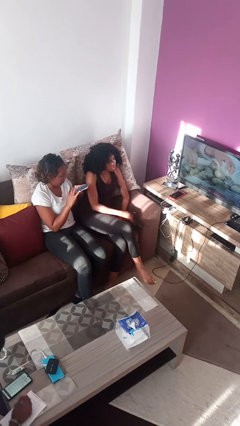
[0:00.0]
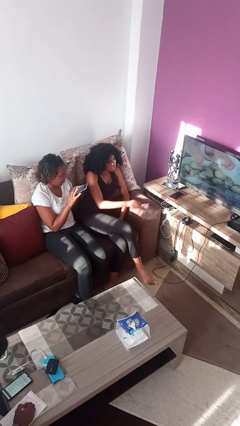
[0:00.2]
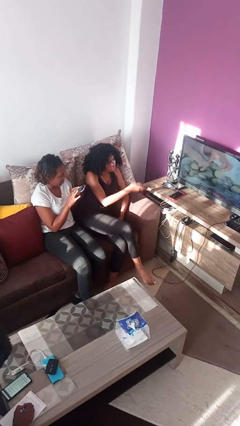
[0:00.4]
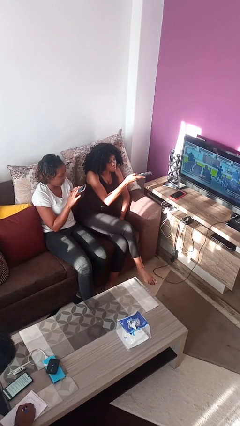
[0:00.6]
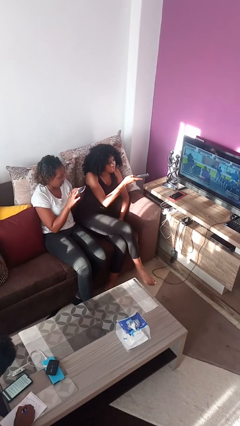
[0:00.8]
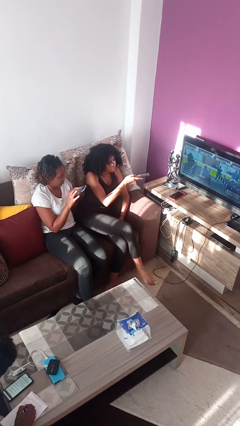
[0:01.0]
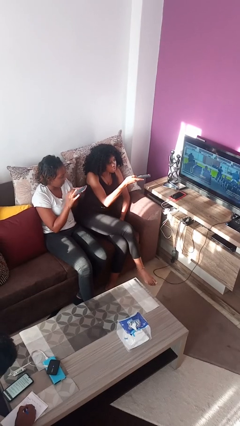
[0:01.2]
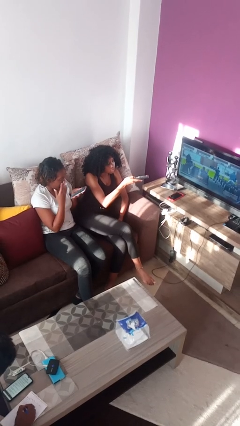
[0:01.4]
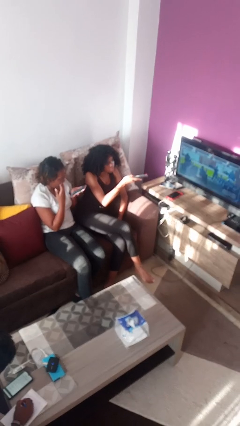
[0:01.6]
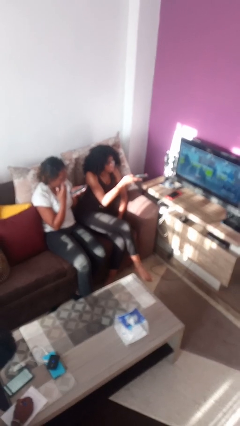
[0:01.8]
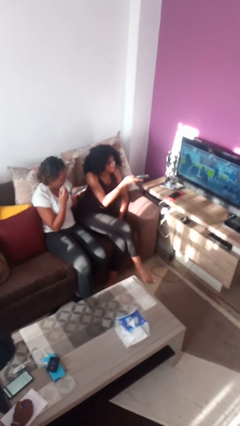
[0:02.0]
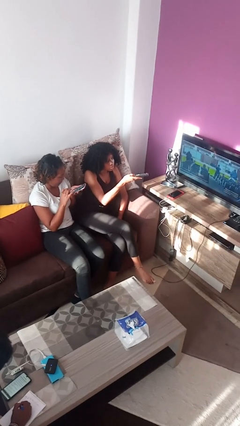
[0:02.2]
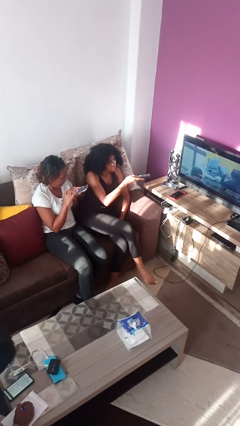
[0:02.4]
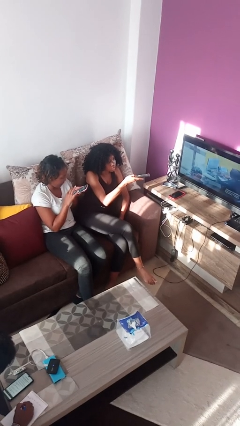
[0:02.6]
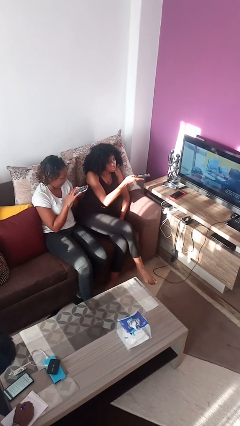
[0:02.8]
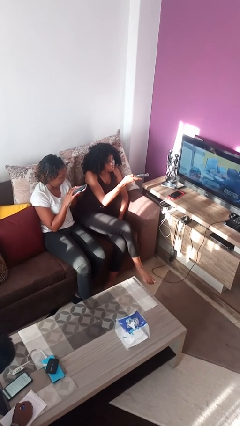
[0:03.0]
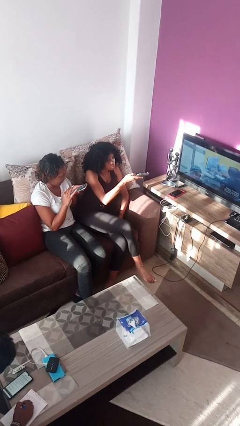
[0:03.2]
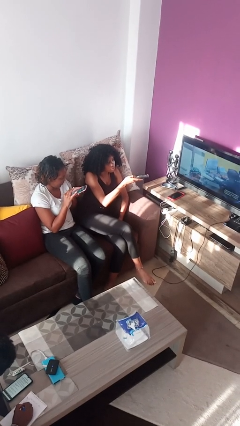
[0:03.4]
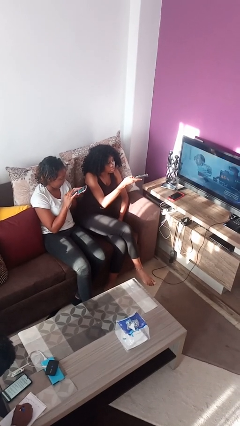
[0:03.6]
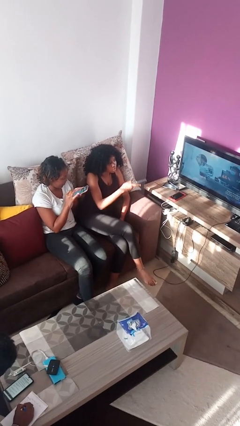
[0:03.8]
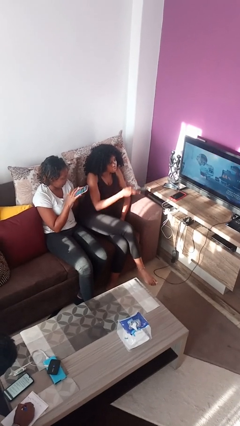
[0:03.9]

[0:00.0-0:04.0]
person uses television remote

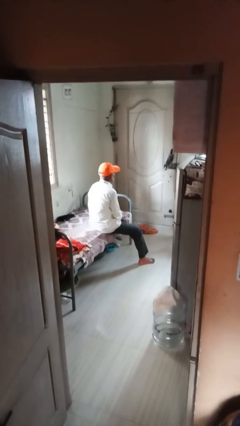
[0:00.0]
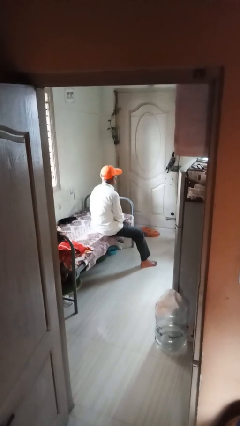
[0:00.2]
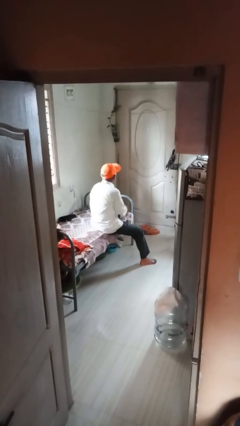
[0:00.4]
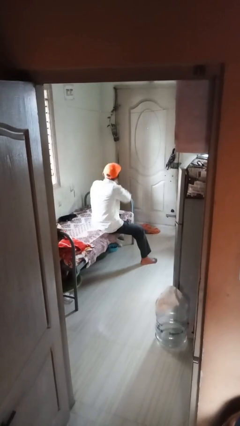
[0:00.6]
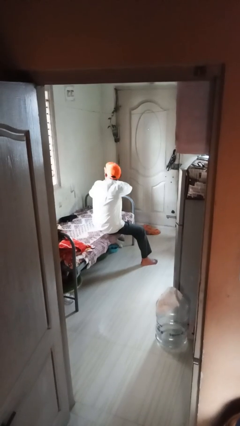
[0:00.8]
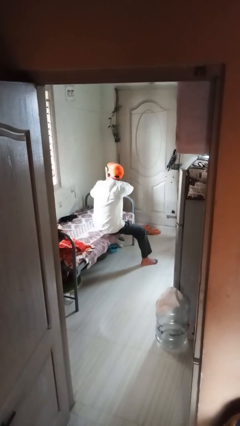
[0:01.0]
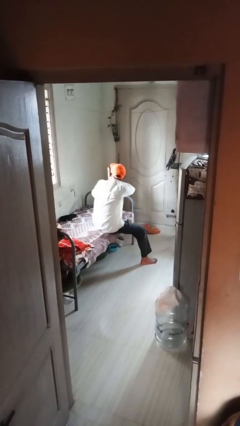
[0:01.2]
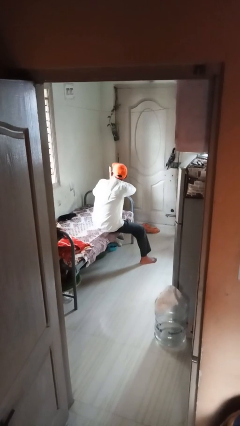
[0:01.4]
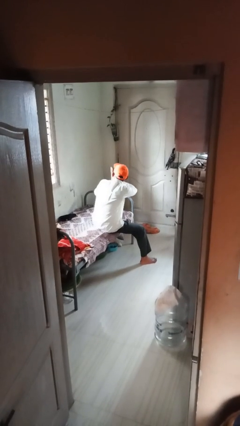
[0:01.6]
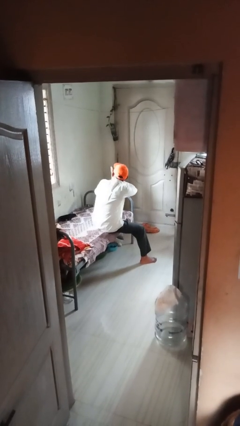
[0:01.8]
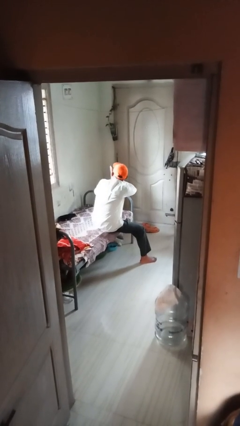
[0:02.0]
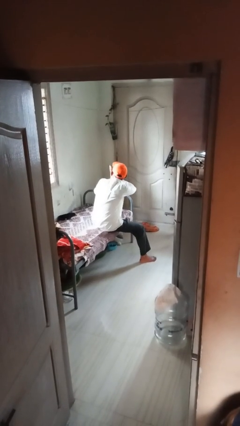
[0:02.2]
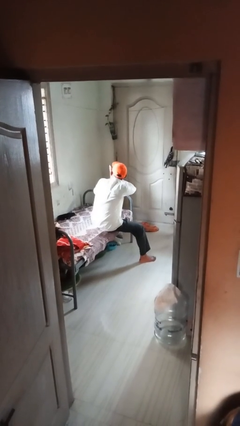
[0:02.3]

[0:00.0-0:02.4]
person prays

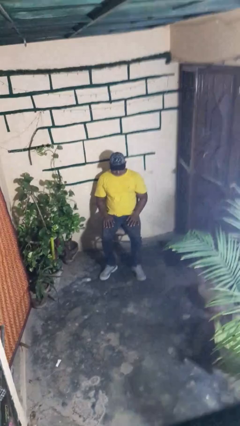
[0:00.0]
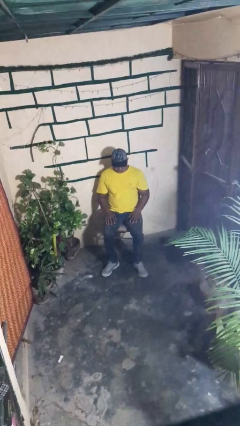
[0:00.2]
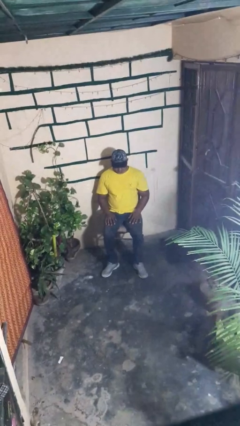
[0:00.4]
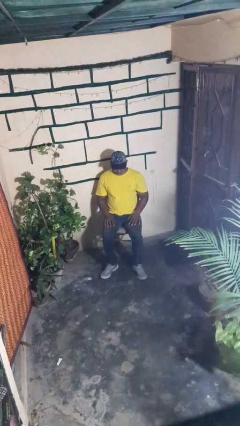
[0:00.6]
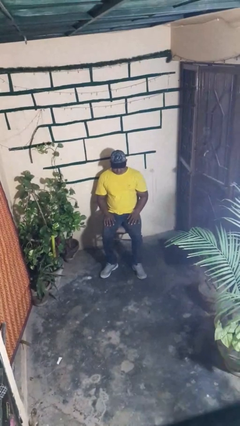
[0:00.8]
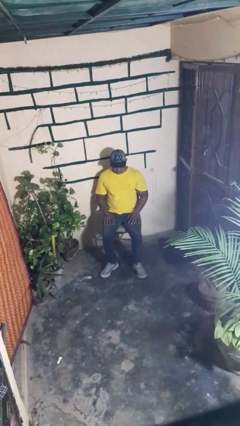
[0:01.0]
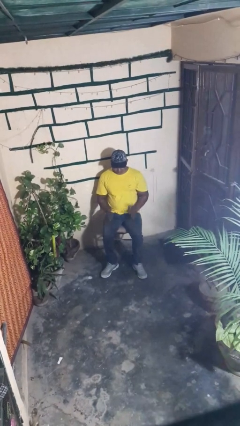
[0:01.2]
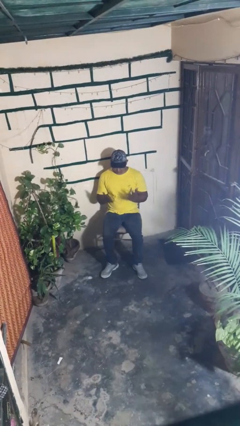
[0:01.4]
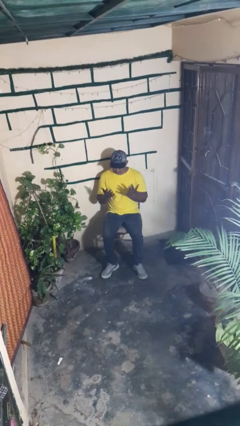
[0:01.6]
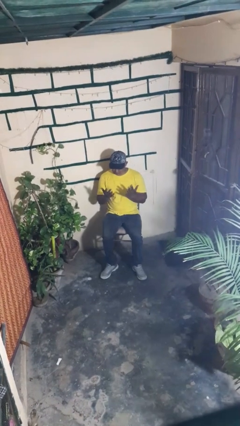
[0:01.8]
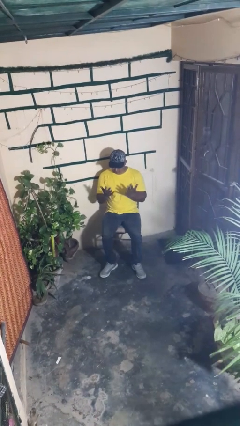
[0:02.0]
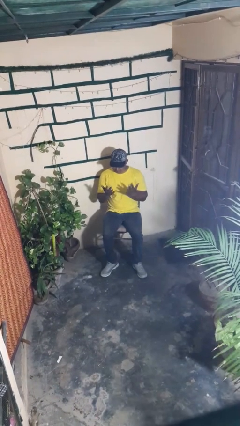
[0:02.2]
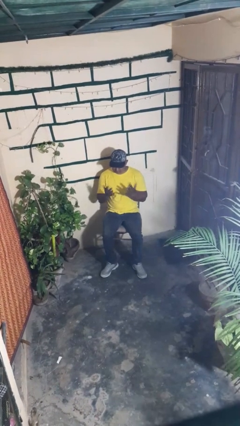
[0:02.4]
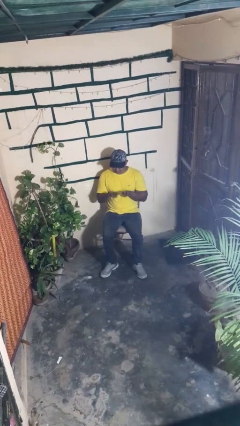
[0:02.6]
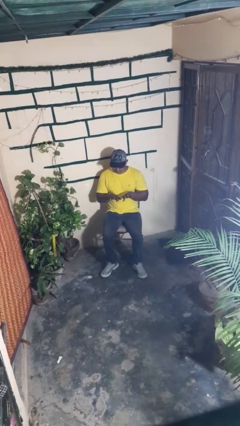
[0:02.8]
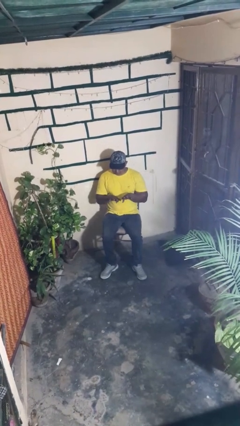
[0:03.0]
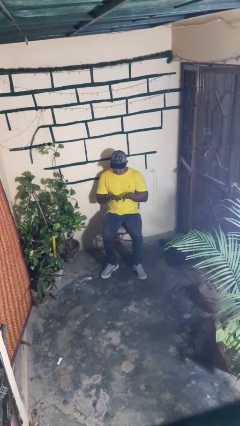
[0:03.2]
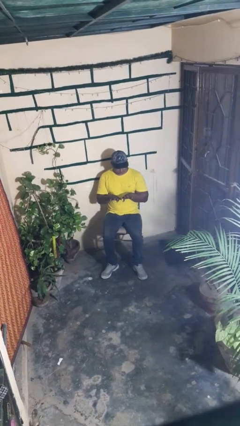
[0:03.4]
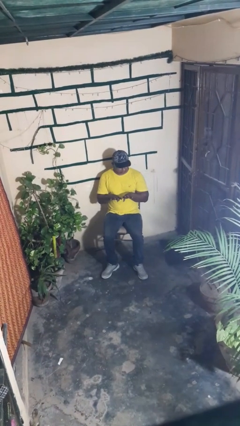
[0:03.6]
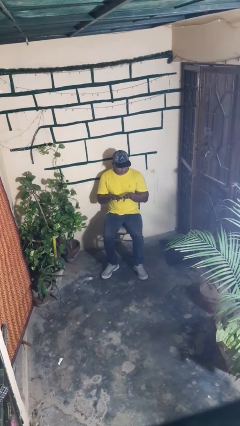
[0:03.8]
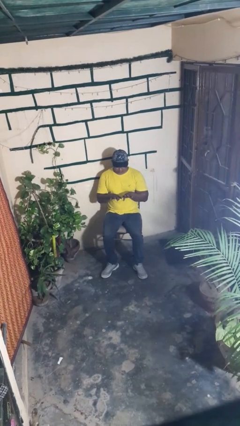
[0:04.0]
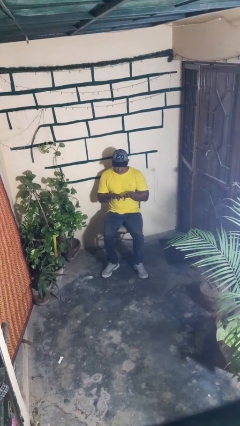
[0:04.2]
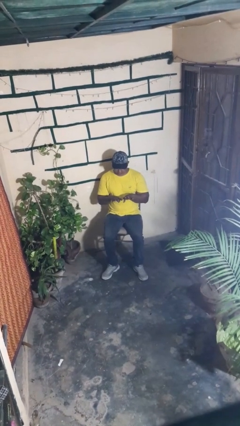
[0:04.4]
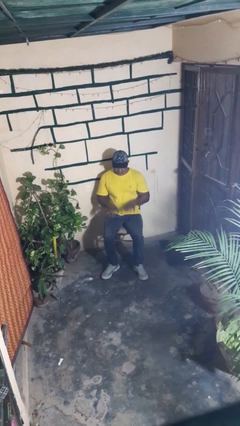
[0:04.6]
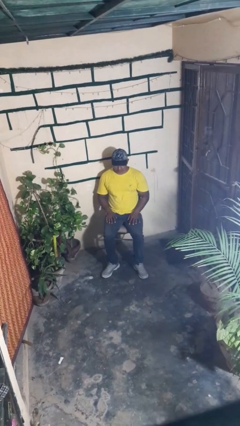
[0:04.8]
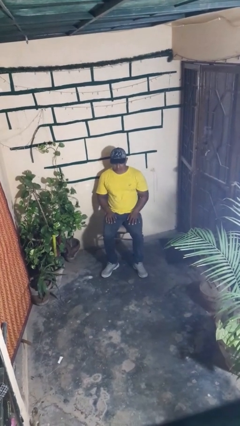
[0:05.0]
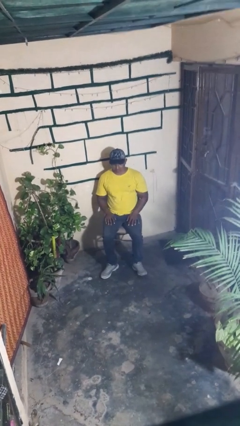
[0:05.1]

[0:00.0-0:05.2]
person looks at hands in lap

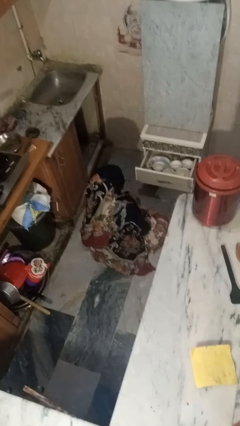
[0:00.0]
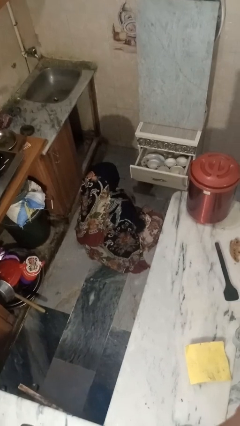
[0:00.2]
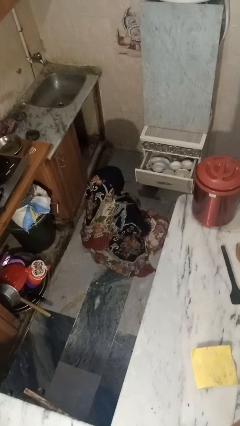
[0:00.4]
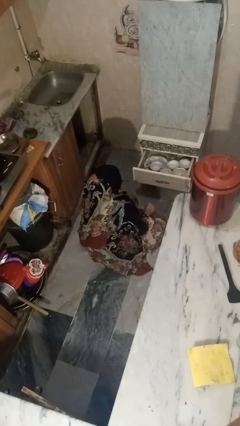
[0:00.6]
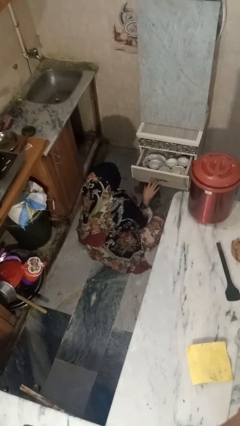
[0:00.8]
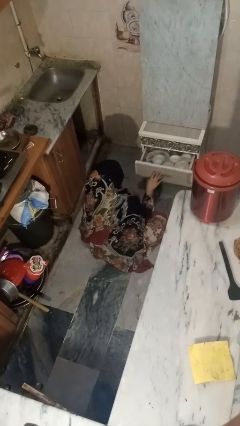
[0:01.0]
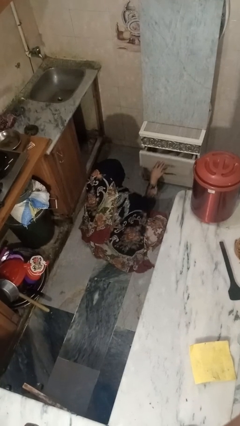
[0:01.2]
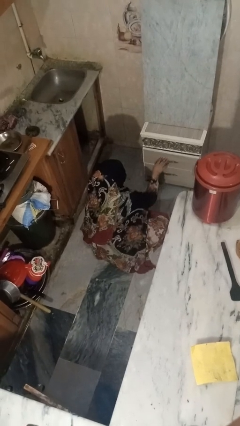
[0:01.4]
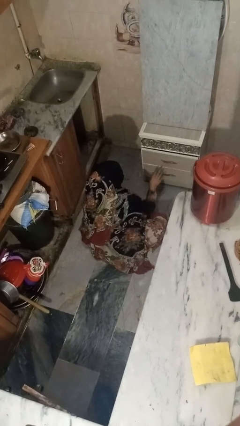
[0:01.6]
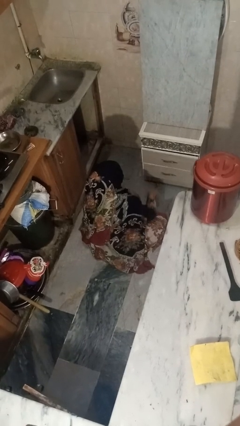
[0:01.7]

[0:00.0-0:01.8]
person closes kitchen drawer

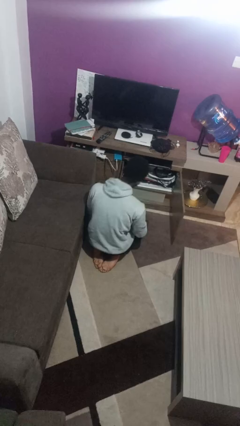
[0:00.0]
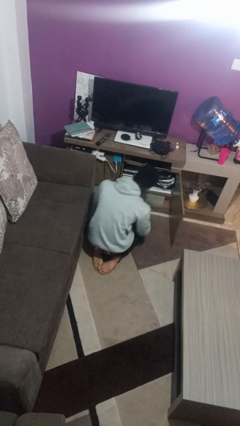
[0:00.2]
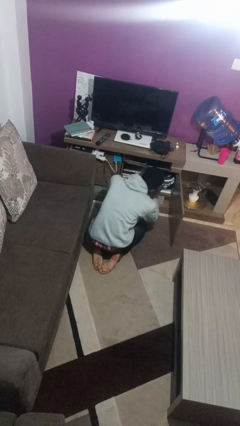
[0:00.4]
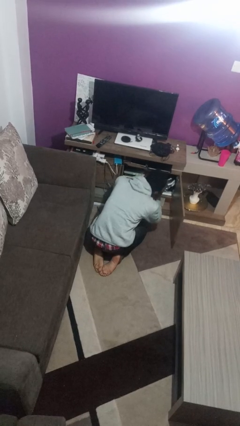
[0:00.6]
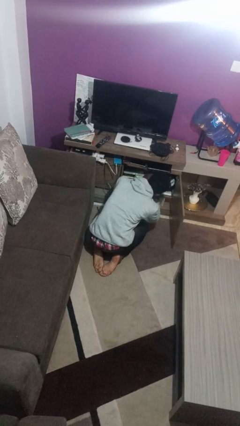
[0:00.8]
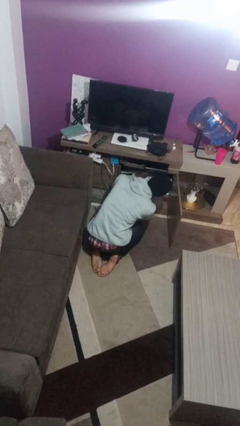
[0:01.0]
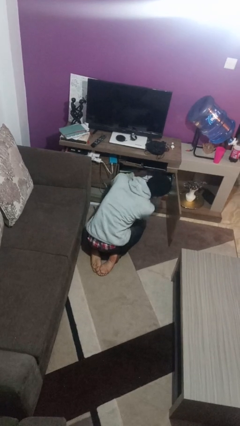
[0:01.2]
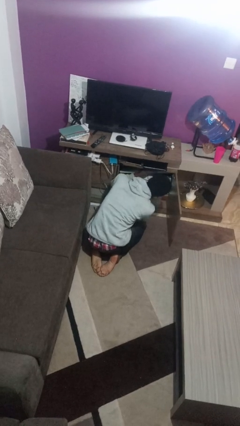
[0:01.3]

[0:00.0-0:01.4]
person searches in cabinet

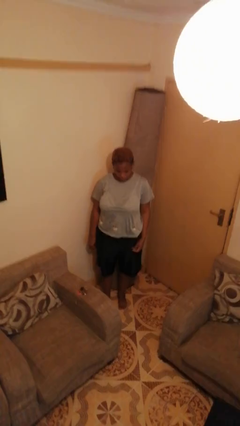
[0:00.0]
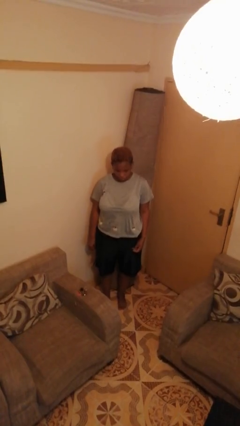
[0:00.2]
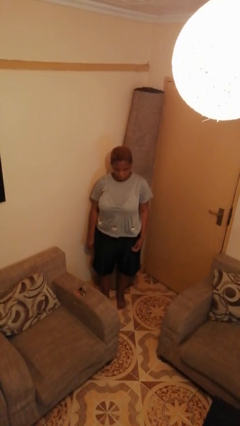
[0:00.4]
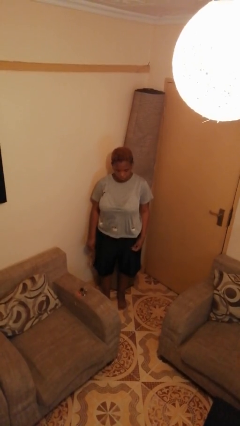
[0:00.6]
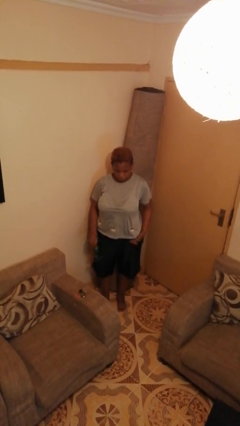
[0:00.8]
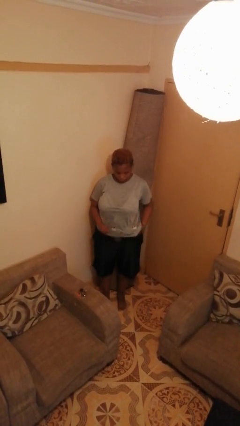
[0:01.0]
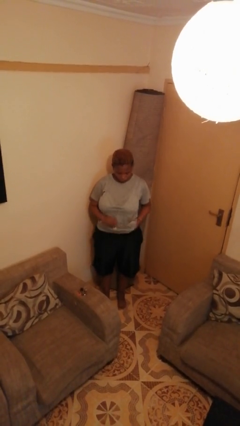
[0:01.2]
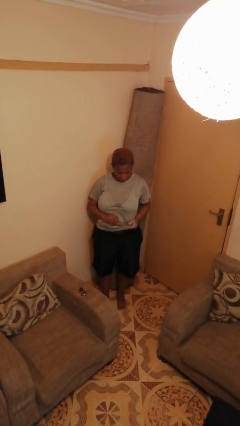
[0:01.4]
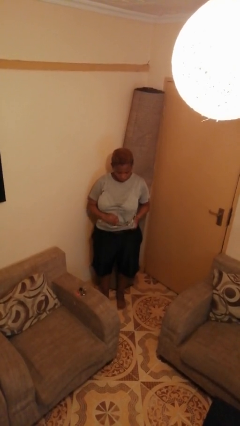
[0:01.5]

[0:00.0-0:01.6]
person cleans eyeglasses

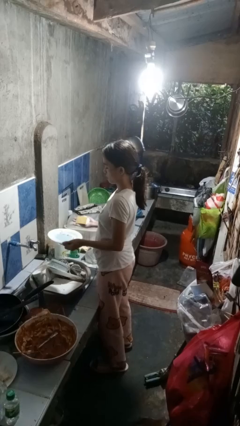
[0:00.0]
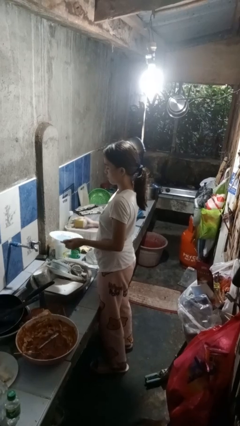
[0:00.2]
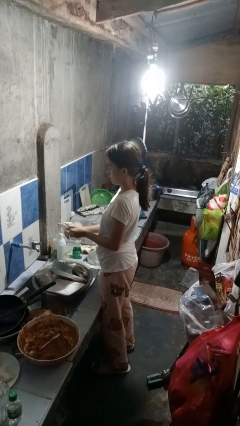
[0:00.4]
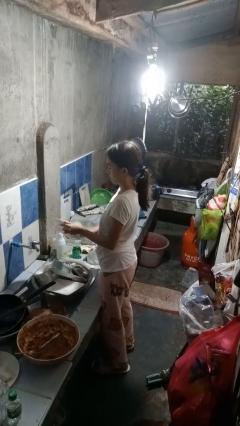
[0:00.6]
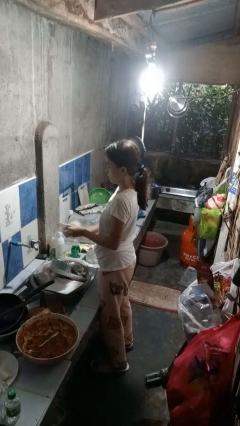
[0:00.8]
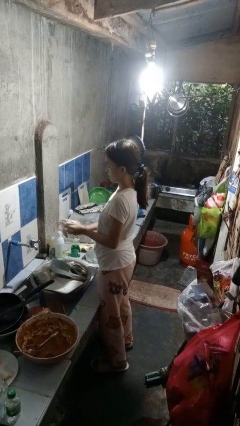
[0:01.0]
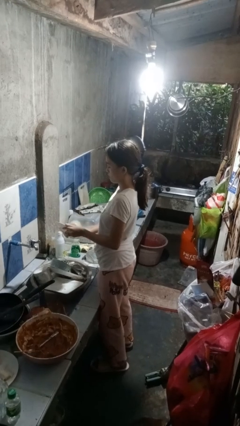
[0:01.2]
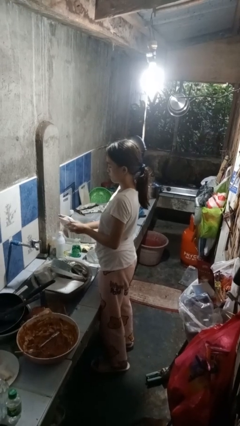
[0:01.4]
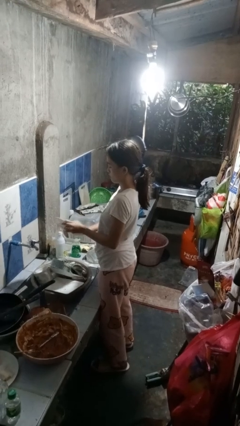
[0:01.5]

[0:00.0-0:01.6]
person washes dish
